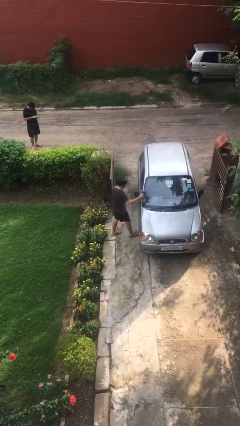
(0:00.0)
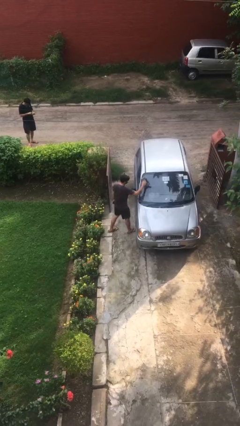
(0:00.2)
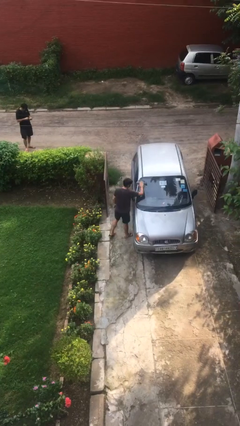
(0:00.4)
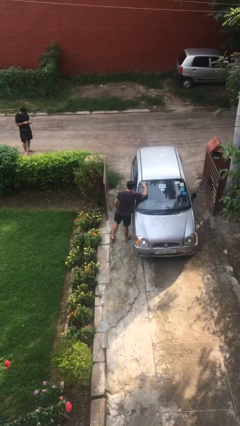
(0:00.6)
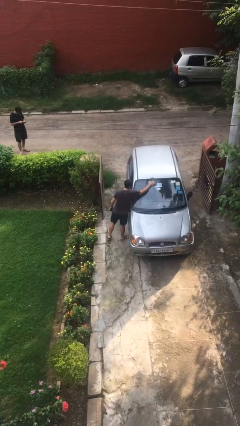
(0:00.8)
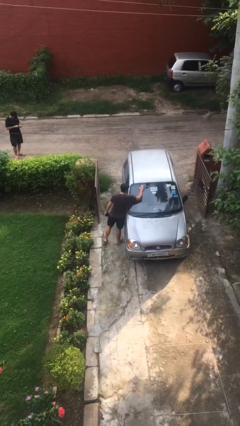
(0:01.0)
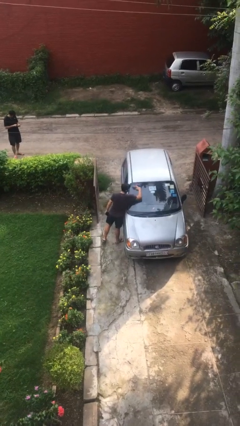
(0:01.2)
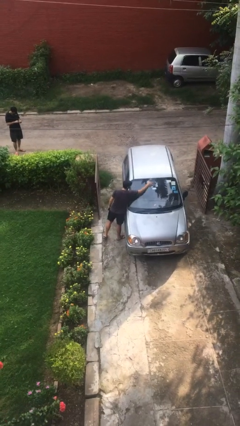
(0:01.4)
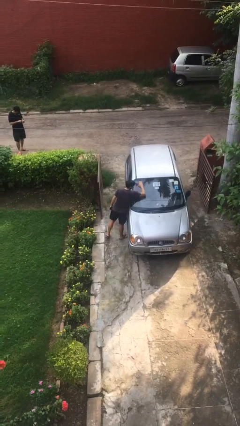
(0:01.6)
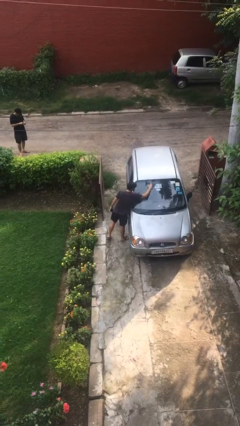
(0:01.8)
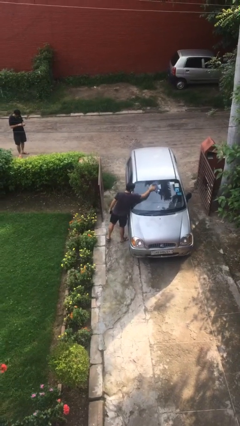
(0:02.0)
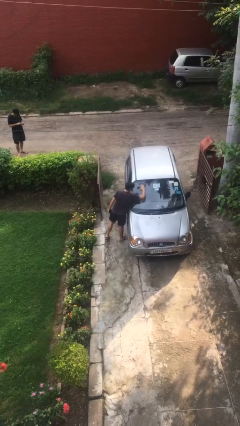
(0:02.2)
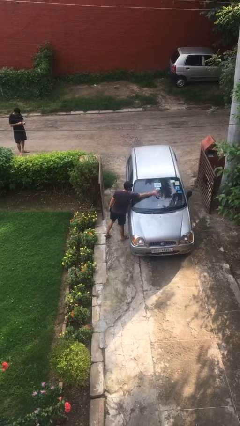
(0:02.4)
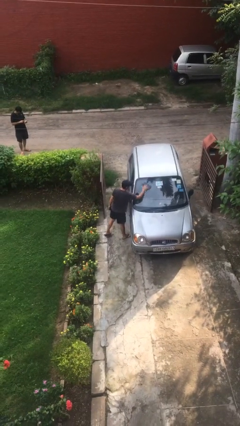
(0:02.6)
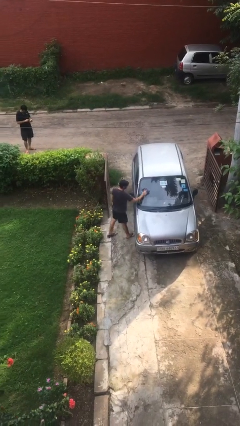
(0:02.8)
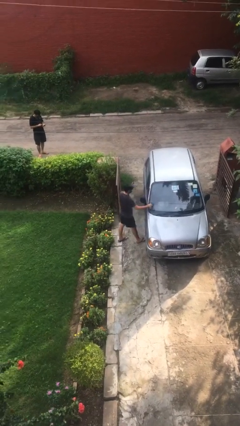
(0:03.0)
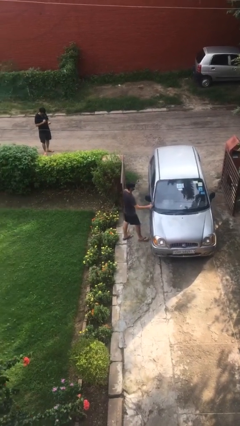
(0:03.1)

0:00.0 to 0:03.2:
person polishes car with rag

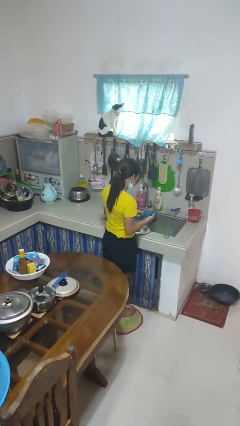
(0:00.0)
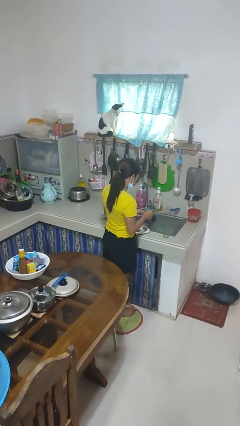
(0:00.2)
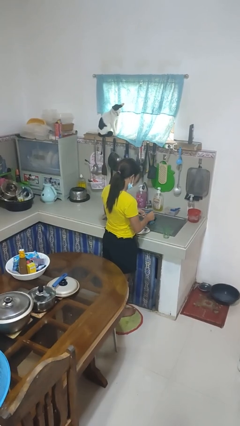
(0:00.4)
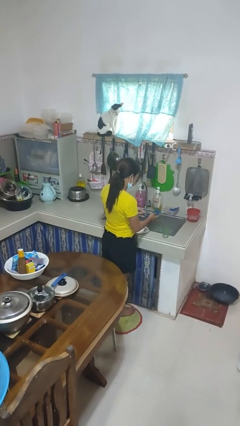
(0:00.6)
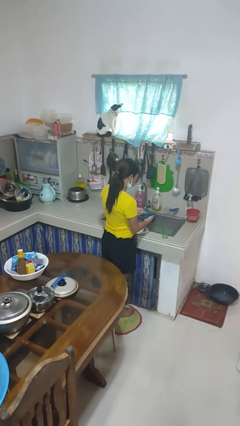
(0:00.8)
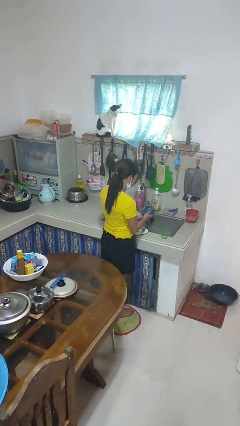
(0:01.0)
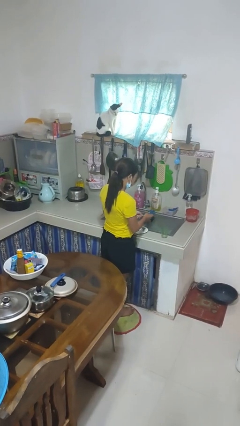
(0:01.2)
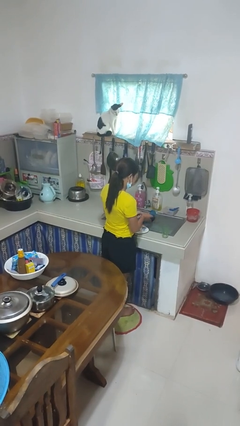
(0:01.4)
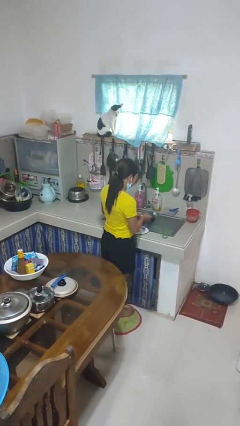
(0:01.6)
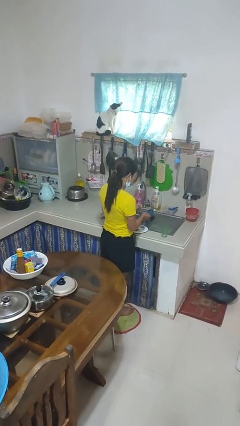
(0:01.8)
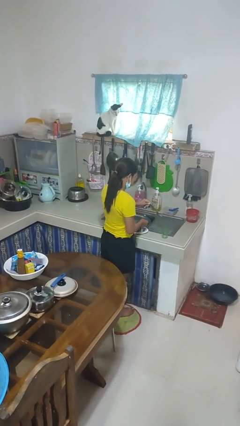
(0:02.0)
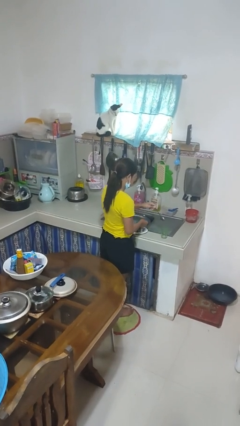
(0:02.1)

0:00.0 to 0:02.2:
person dries dish

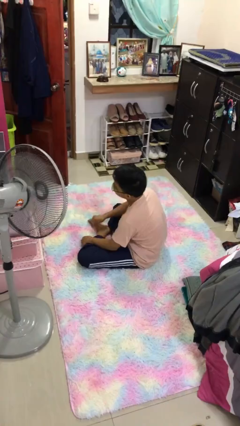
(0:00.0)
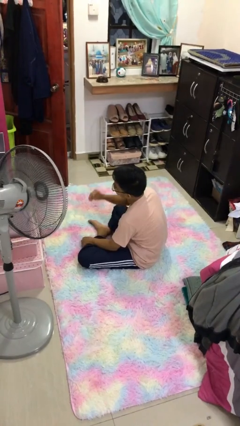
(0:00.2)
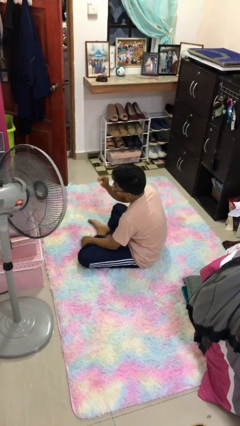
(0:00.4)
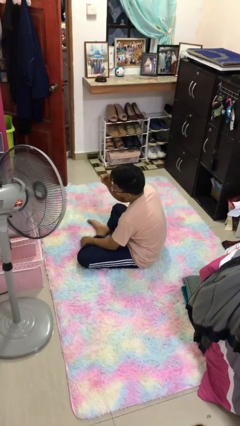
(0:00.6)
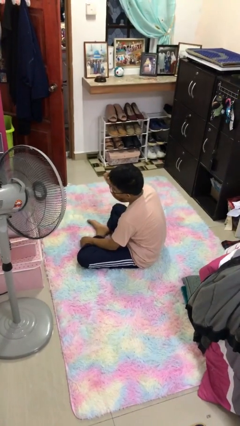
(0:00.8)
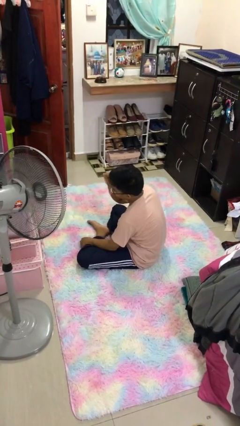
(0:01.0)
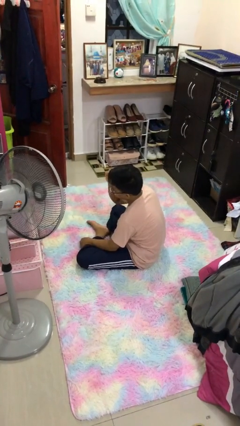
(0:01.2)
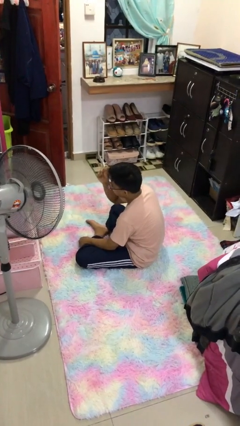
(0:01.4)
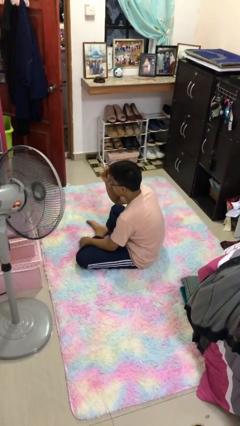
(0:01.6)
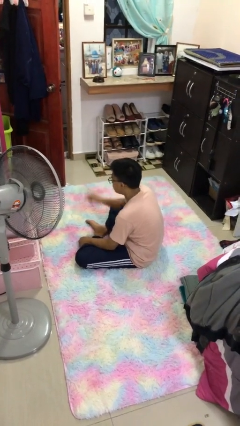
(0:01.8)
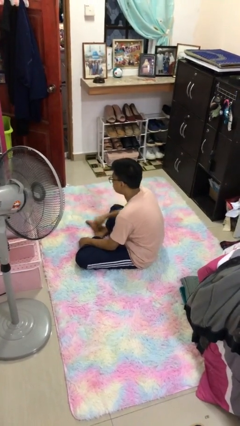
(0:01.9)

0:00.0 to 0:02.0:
person snaps fingers

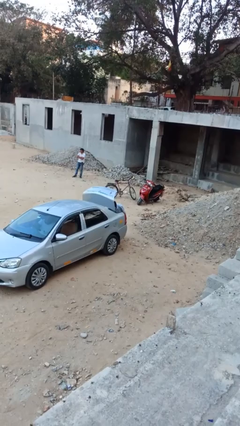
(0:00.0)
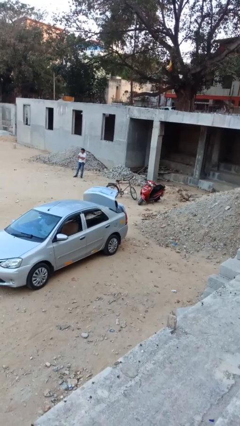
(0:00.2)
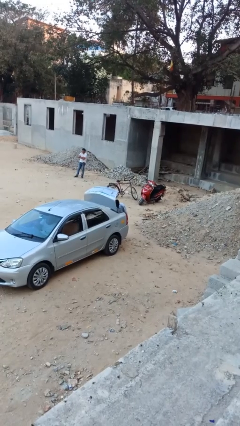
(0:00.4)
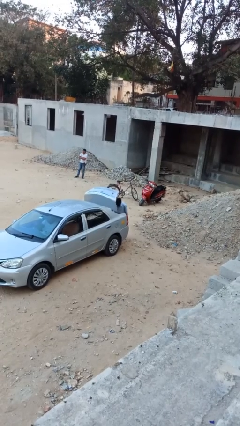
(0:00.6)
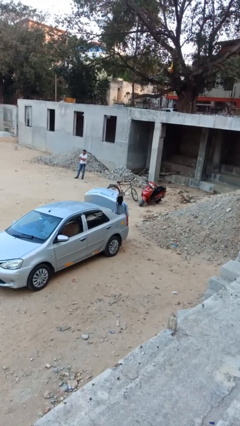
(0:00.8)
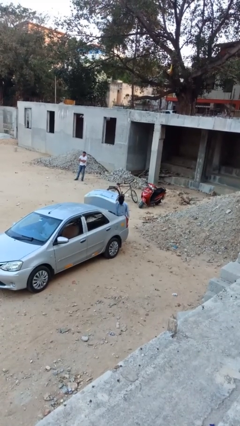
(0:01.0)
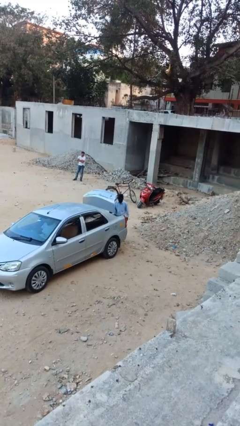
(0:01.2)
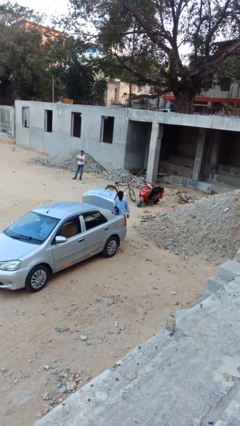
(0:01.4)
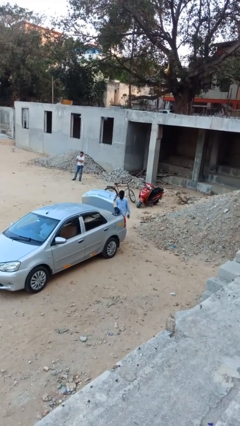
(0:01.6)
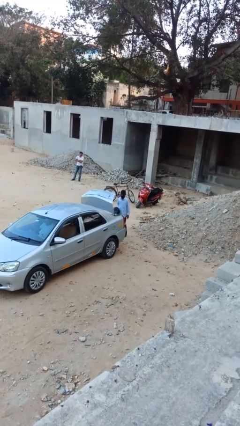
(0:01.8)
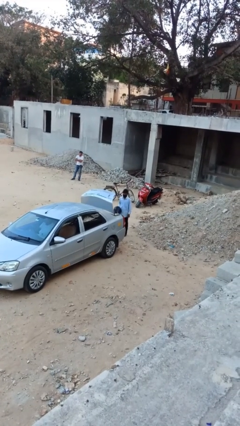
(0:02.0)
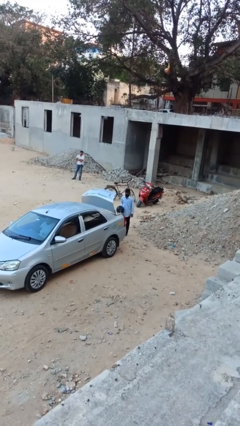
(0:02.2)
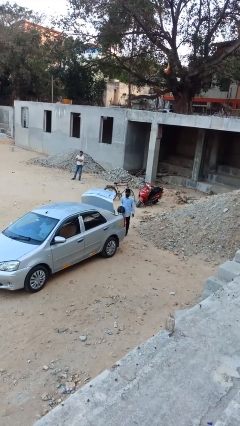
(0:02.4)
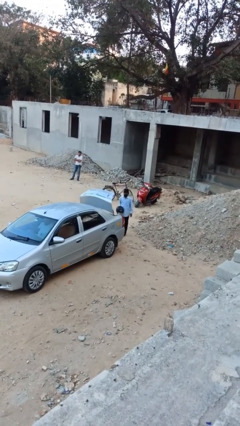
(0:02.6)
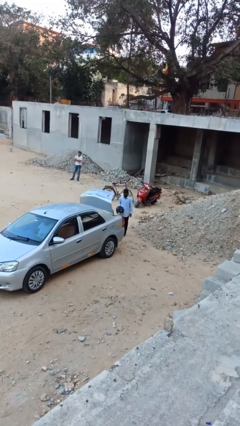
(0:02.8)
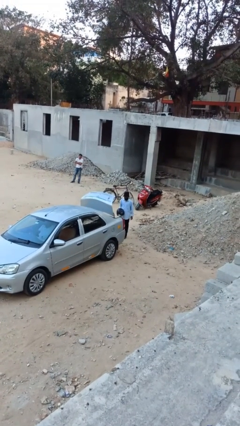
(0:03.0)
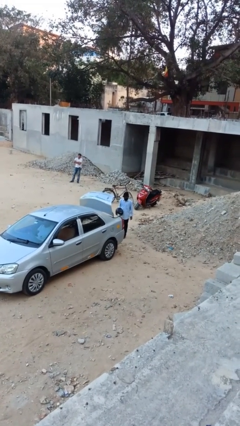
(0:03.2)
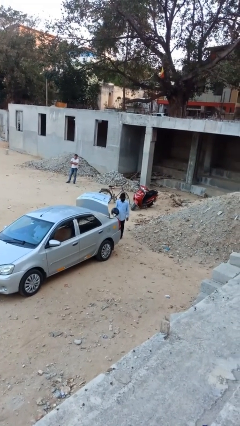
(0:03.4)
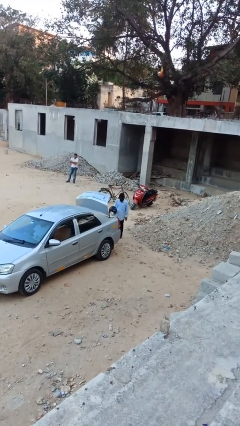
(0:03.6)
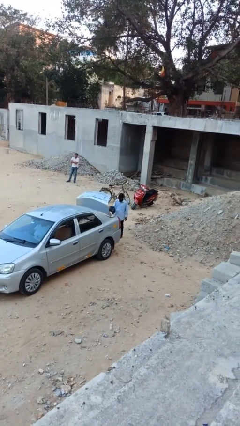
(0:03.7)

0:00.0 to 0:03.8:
person unloads car

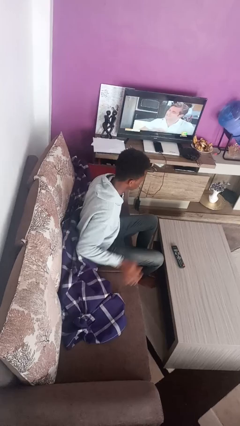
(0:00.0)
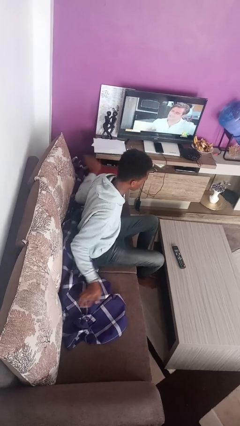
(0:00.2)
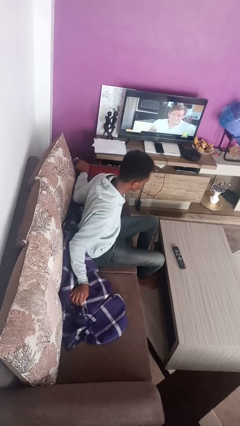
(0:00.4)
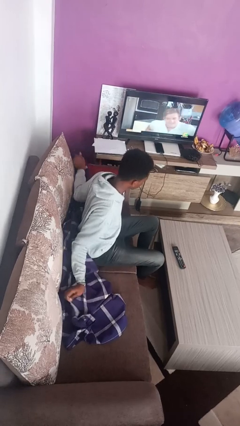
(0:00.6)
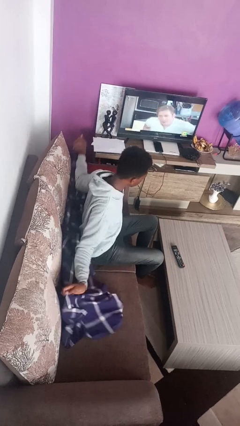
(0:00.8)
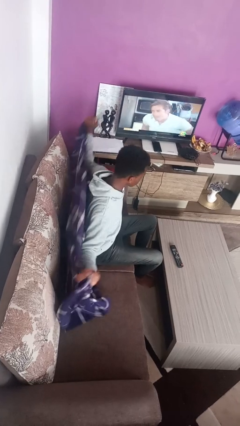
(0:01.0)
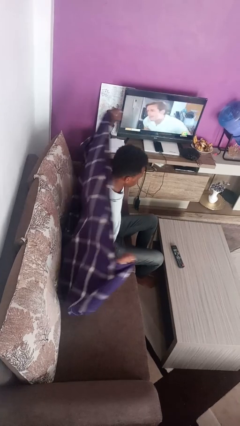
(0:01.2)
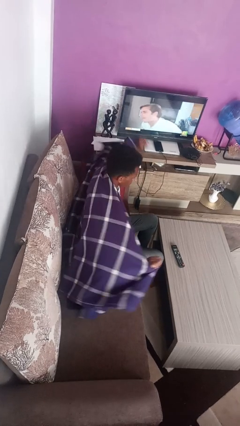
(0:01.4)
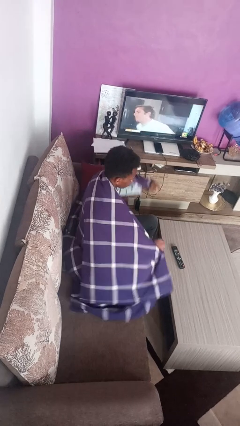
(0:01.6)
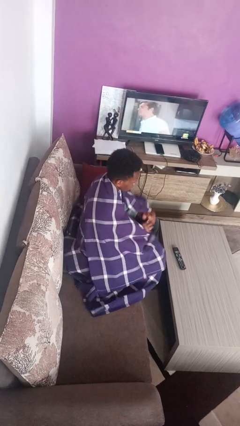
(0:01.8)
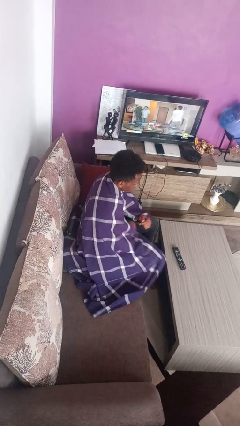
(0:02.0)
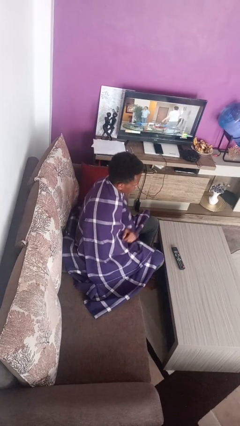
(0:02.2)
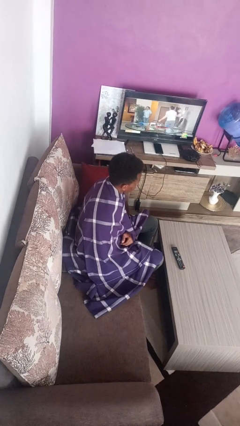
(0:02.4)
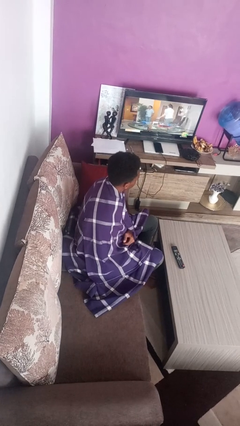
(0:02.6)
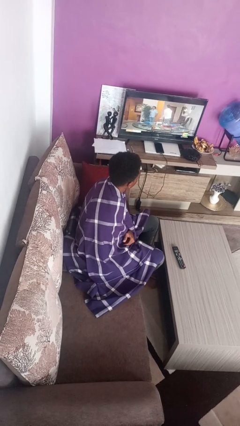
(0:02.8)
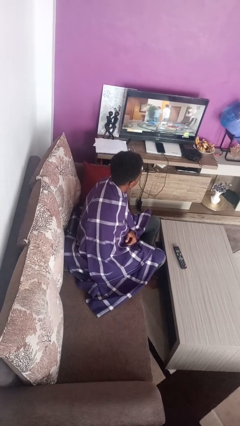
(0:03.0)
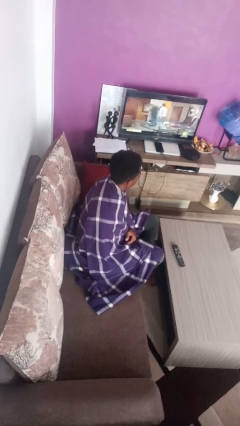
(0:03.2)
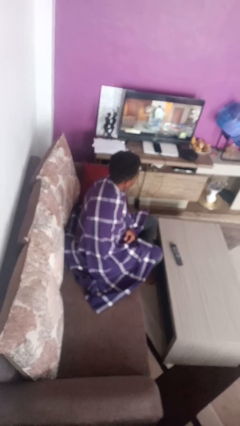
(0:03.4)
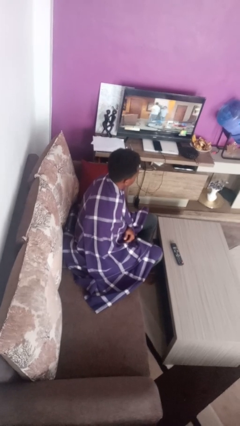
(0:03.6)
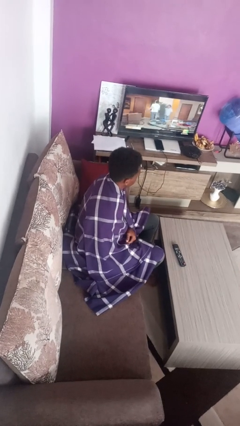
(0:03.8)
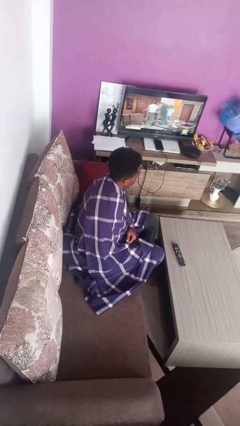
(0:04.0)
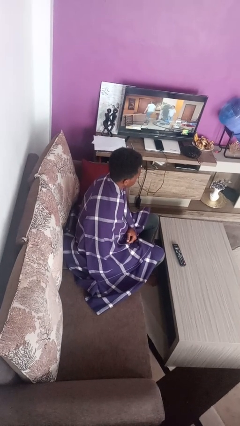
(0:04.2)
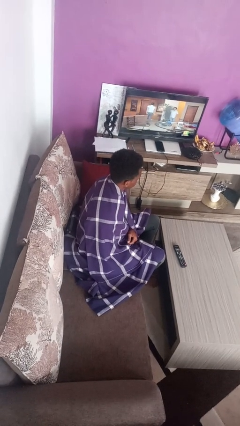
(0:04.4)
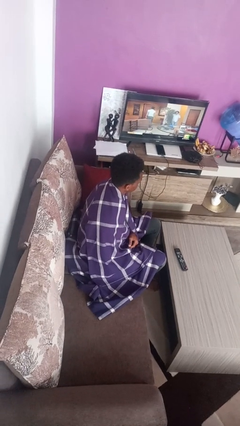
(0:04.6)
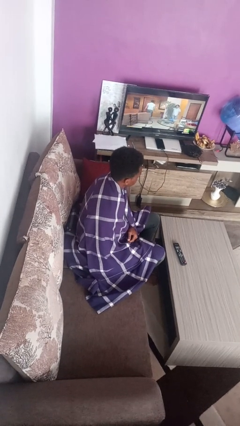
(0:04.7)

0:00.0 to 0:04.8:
person covers with blanket

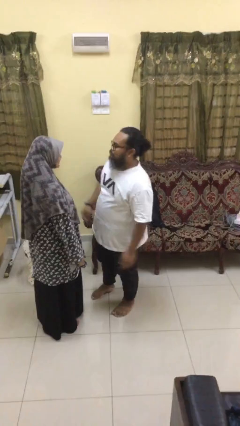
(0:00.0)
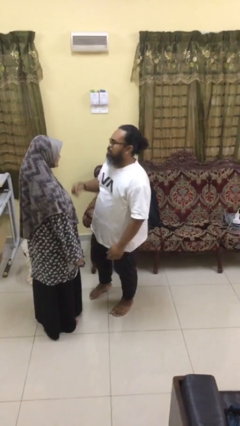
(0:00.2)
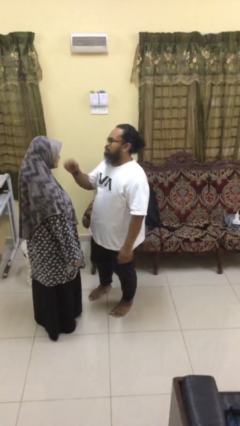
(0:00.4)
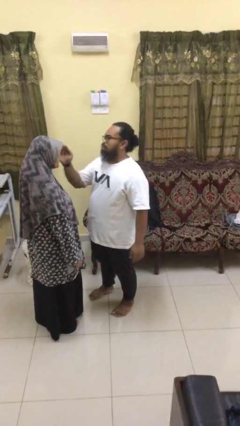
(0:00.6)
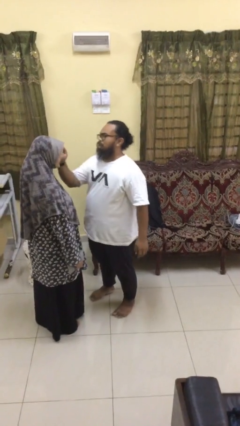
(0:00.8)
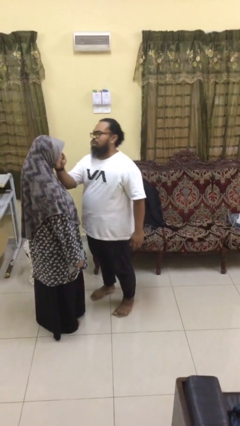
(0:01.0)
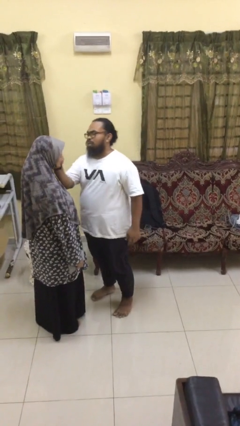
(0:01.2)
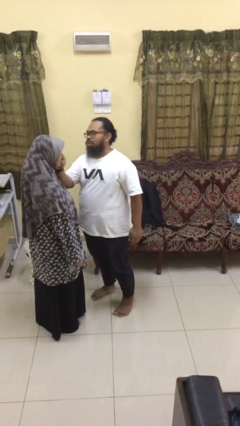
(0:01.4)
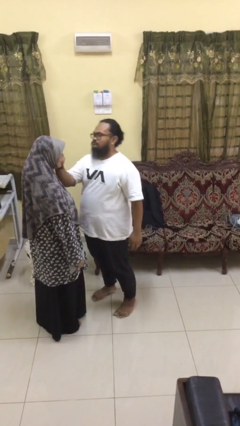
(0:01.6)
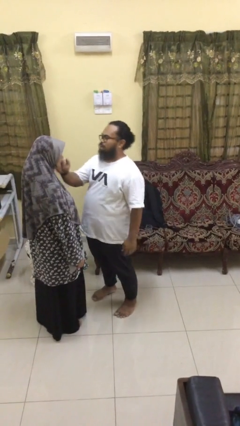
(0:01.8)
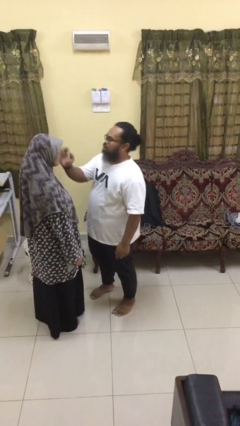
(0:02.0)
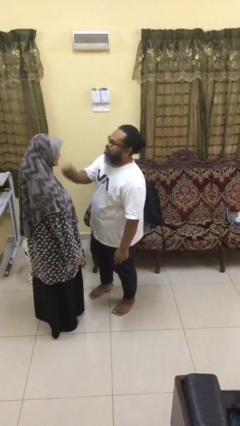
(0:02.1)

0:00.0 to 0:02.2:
person touches face of person
